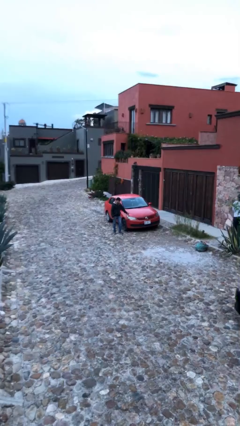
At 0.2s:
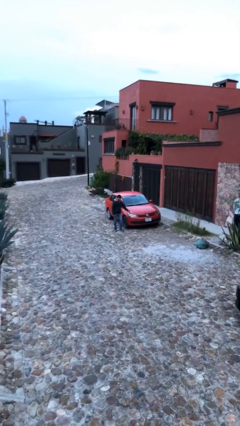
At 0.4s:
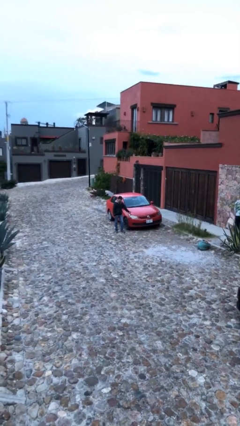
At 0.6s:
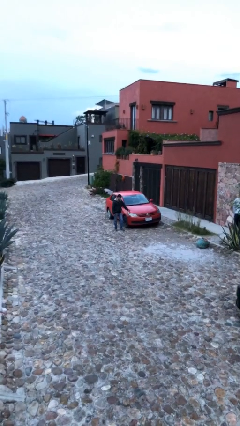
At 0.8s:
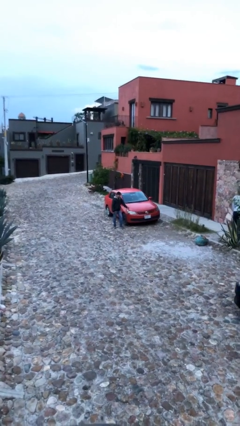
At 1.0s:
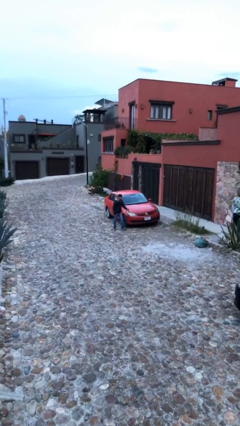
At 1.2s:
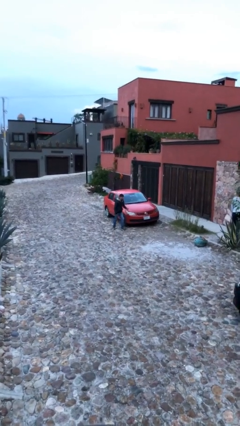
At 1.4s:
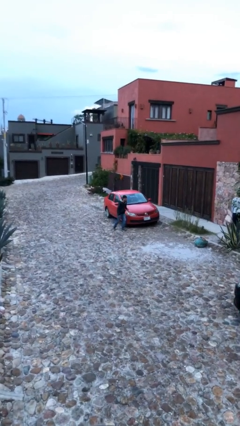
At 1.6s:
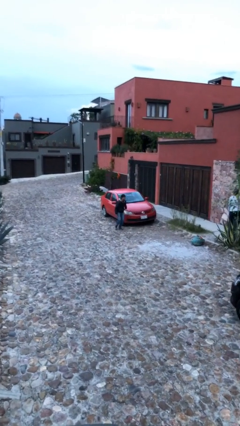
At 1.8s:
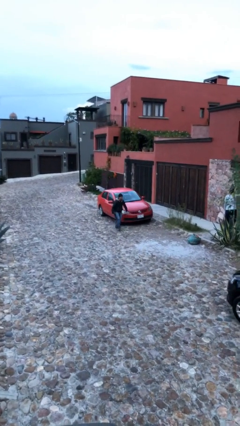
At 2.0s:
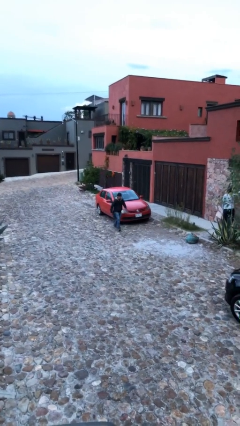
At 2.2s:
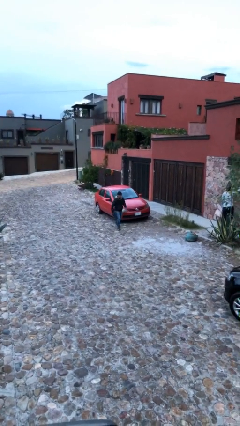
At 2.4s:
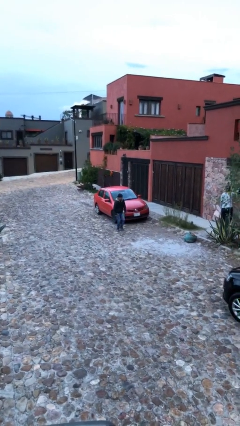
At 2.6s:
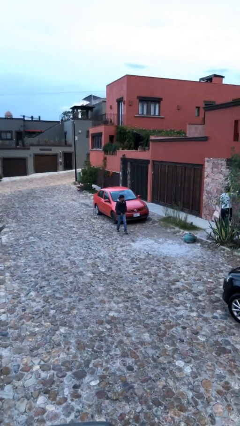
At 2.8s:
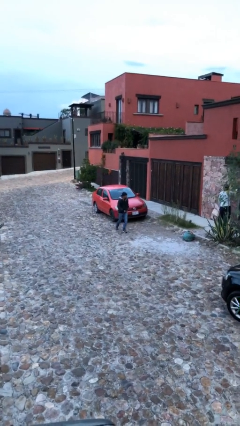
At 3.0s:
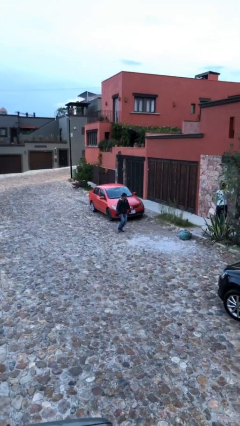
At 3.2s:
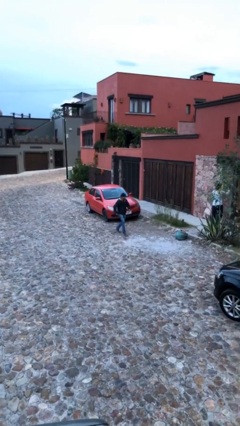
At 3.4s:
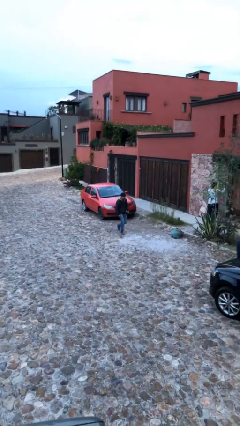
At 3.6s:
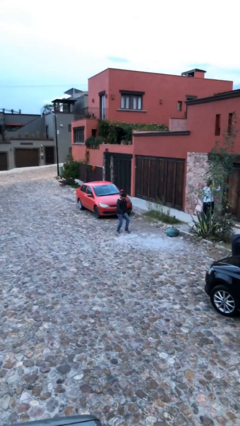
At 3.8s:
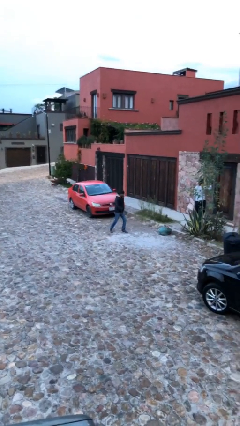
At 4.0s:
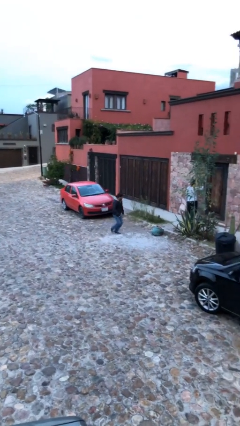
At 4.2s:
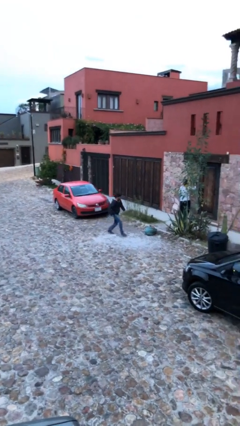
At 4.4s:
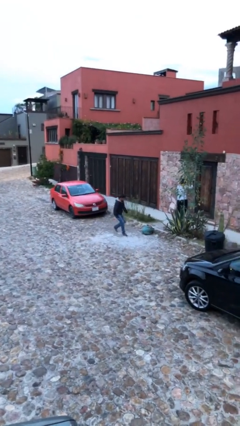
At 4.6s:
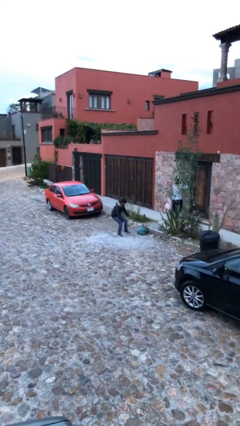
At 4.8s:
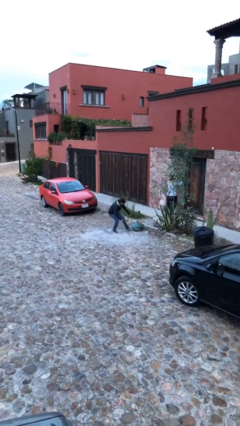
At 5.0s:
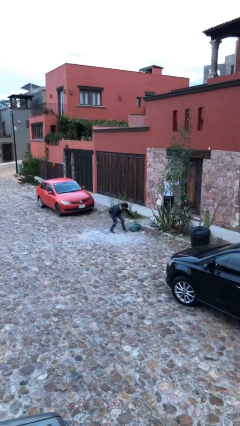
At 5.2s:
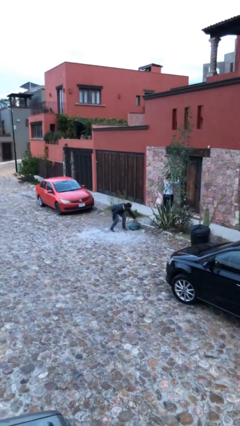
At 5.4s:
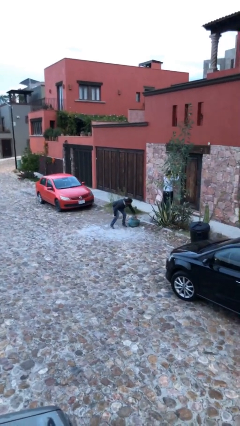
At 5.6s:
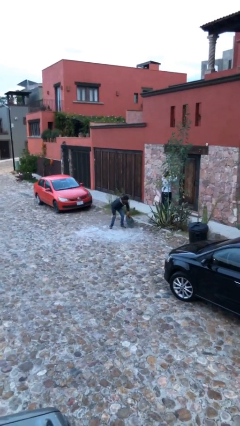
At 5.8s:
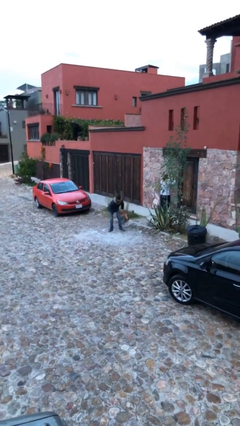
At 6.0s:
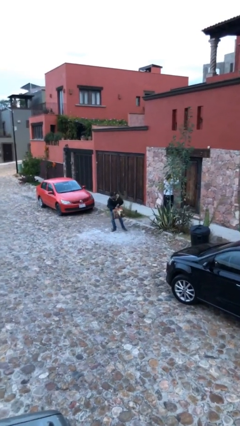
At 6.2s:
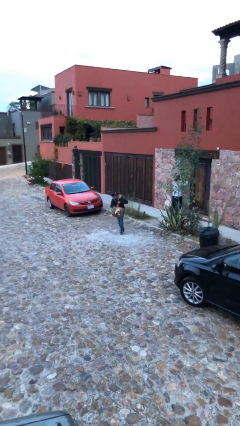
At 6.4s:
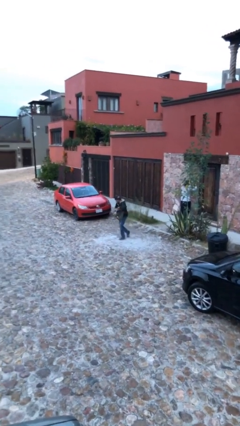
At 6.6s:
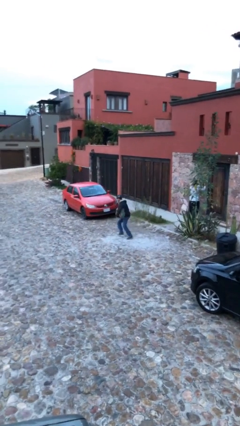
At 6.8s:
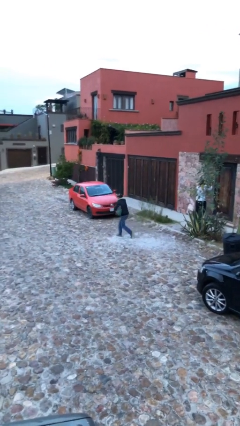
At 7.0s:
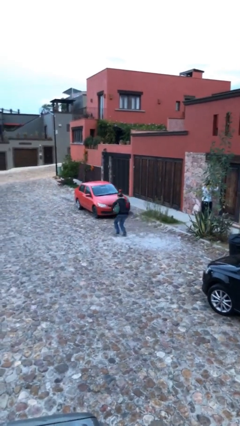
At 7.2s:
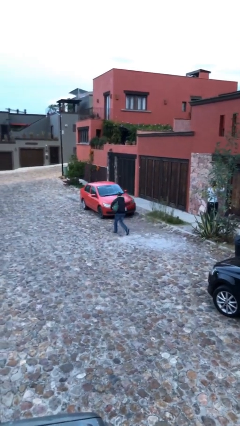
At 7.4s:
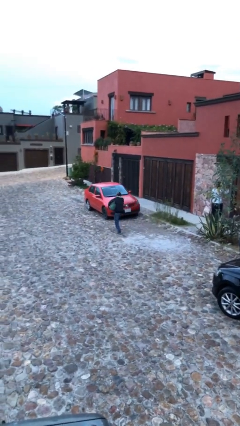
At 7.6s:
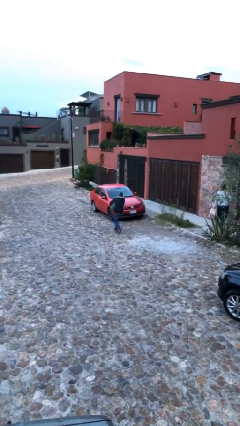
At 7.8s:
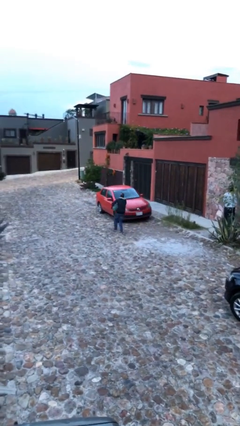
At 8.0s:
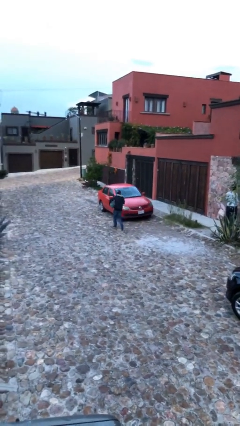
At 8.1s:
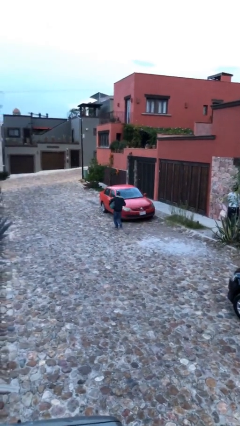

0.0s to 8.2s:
person steals object from person

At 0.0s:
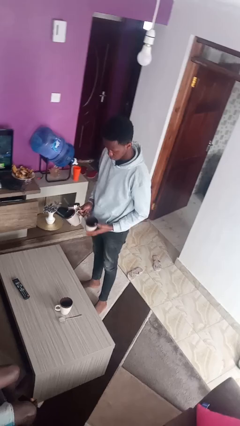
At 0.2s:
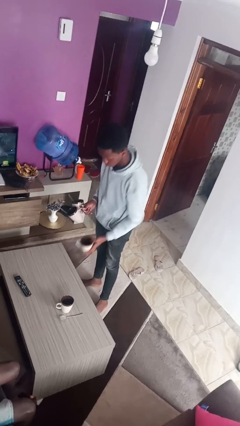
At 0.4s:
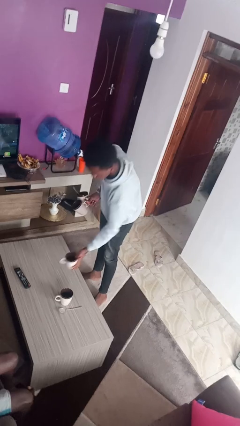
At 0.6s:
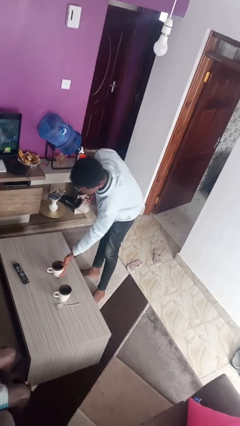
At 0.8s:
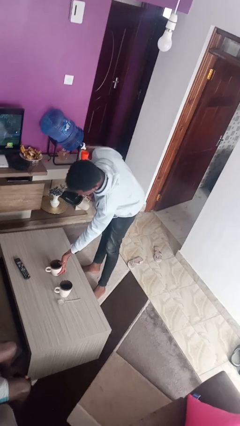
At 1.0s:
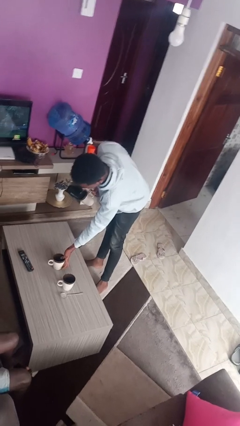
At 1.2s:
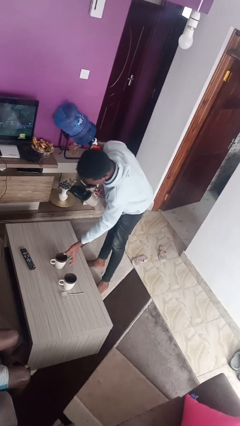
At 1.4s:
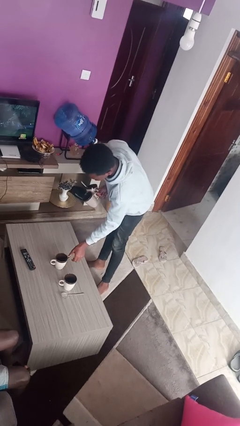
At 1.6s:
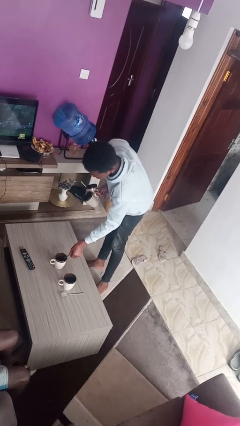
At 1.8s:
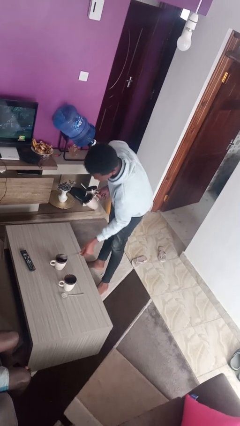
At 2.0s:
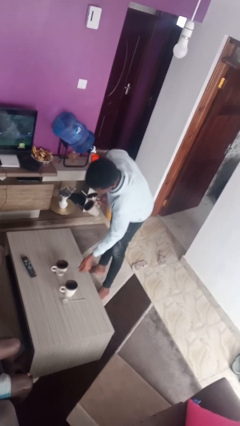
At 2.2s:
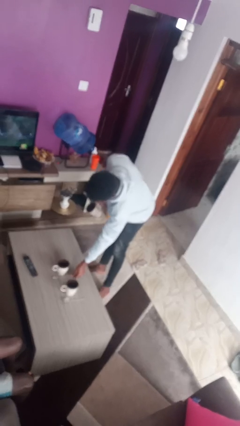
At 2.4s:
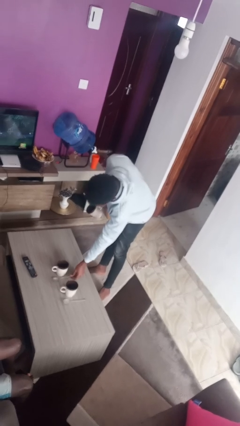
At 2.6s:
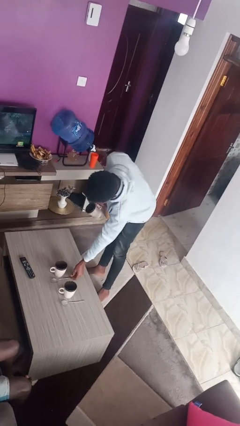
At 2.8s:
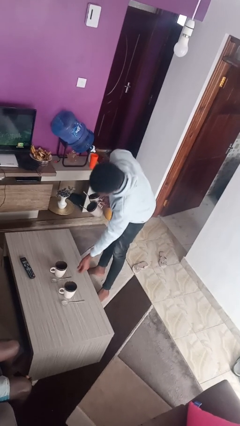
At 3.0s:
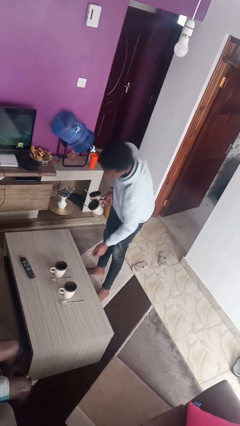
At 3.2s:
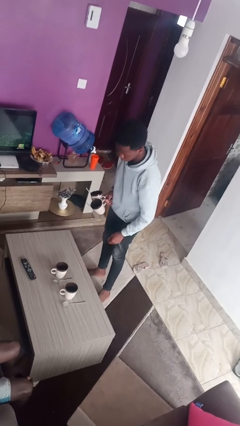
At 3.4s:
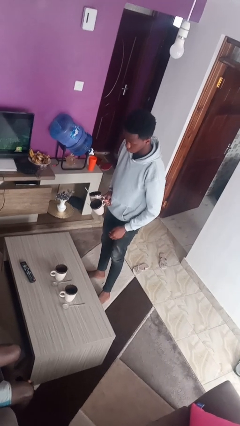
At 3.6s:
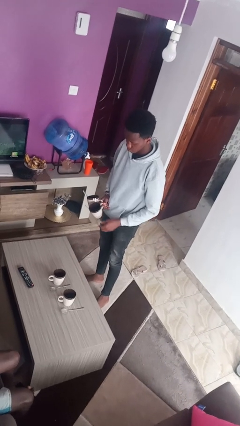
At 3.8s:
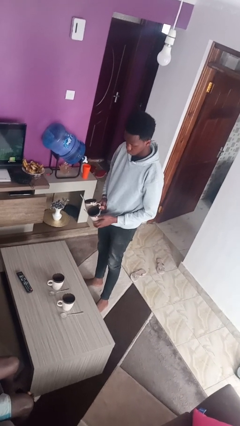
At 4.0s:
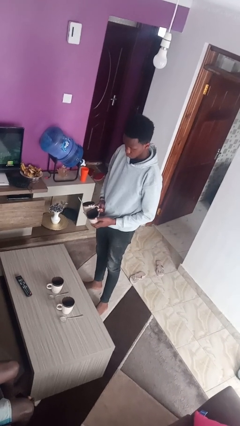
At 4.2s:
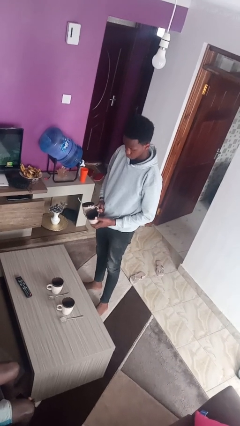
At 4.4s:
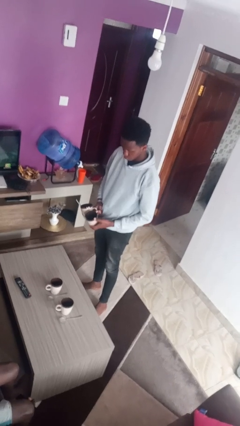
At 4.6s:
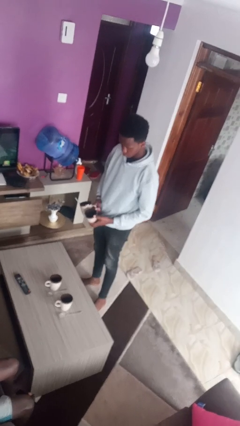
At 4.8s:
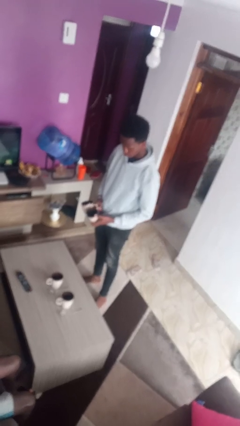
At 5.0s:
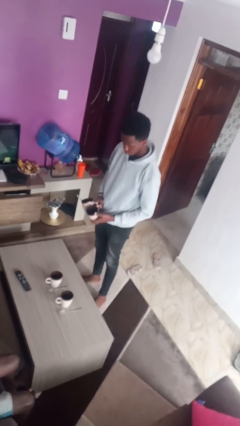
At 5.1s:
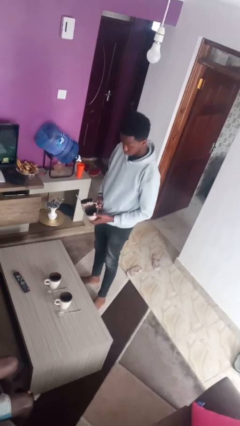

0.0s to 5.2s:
person sets table

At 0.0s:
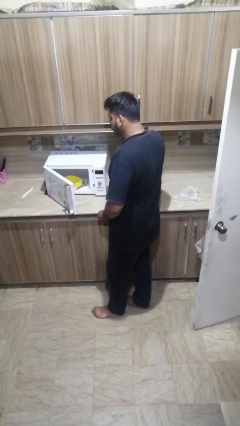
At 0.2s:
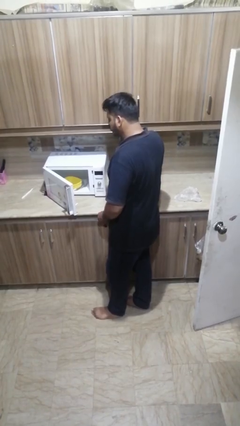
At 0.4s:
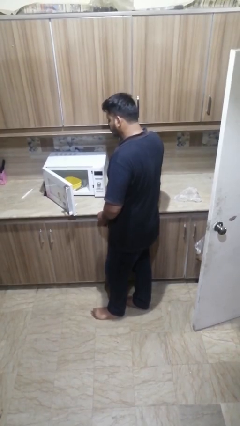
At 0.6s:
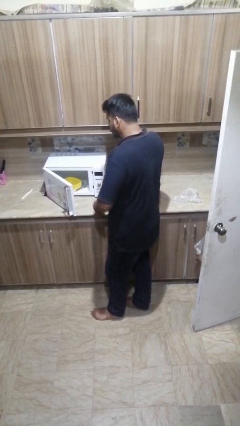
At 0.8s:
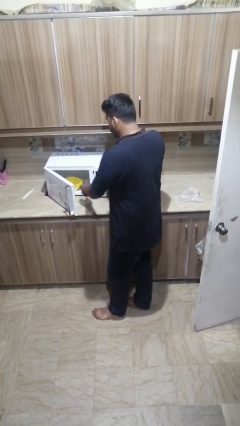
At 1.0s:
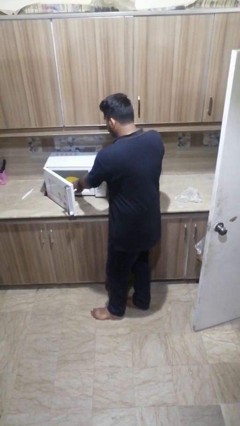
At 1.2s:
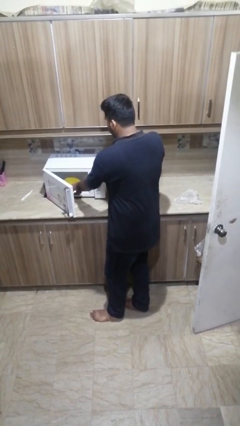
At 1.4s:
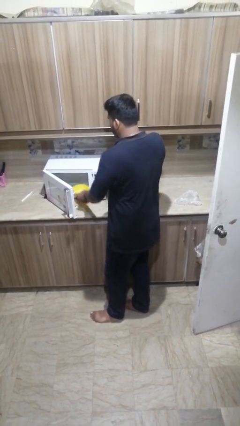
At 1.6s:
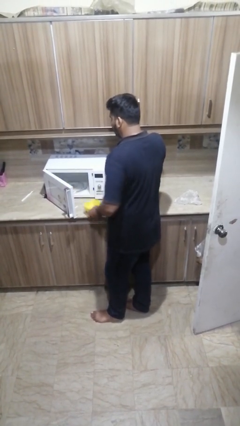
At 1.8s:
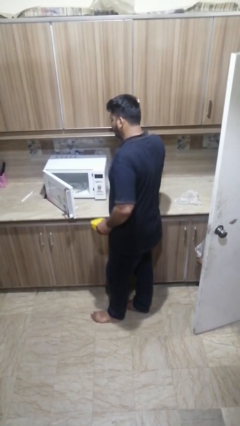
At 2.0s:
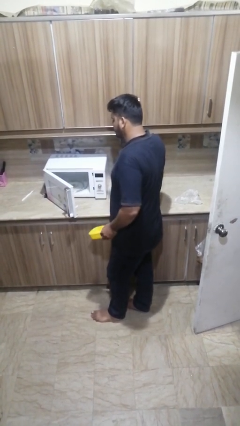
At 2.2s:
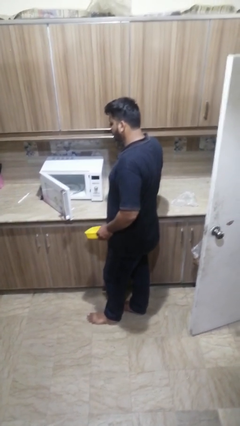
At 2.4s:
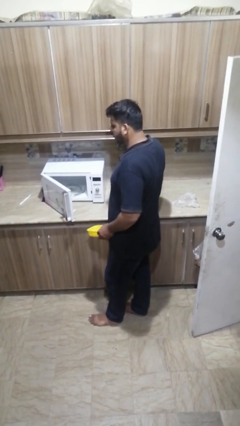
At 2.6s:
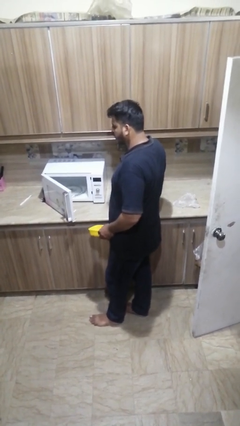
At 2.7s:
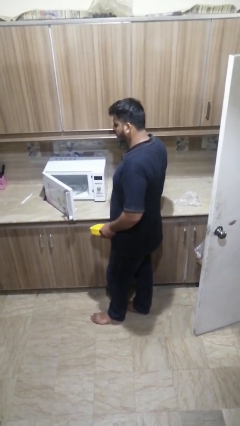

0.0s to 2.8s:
person takes object from microwave

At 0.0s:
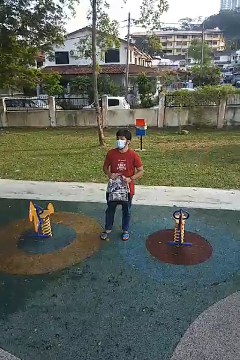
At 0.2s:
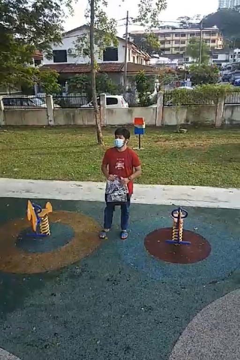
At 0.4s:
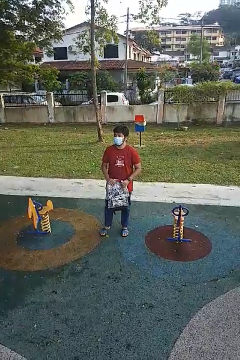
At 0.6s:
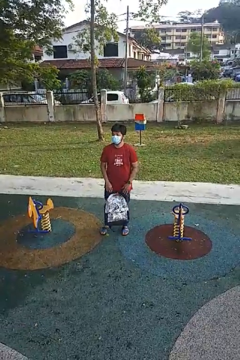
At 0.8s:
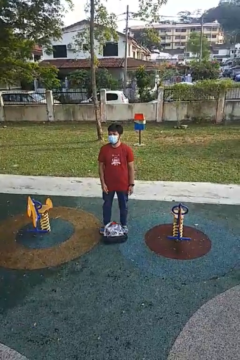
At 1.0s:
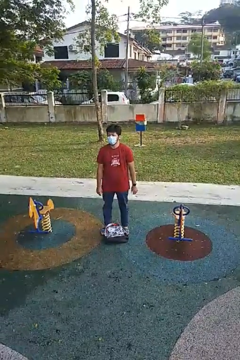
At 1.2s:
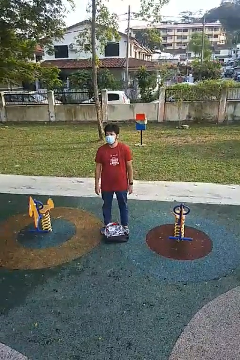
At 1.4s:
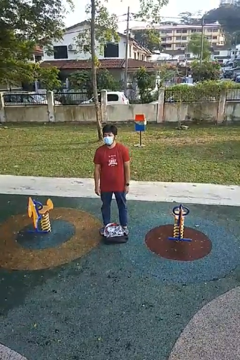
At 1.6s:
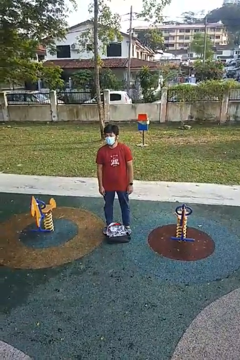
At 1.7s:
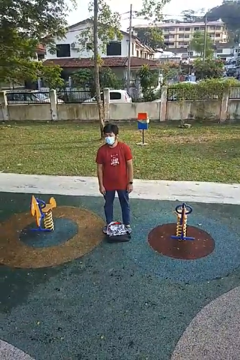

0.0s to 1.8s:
person drops object

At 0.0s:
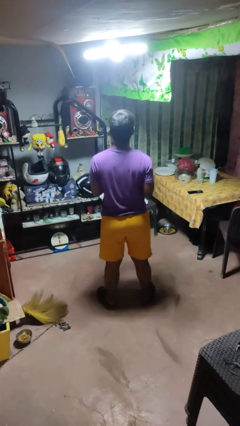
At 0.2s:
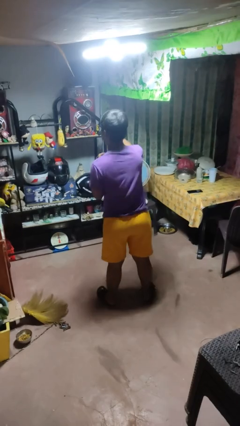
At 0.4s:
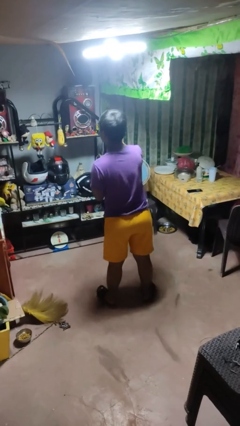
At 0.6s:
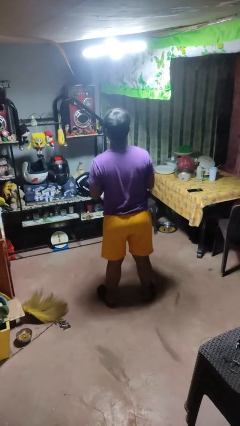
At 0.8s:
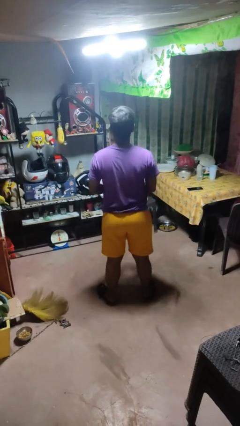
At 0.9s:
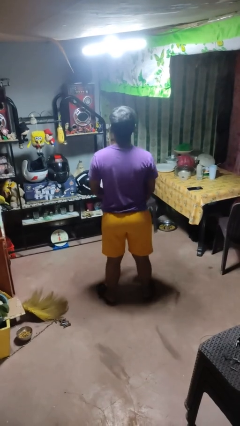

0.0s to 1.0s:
person punches
